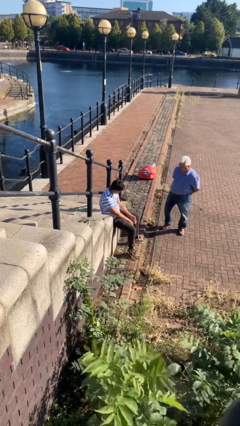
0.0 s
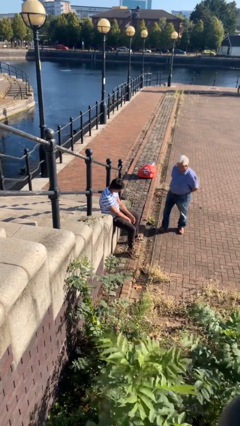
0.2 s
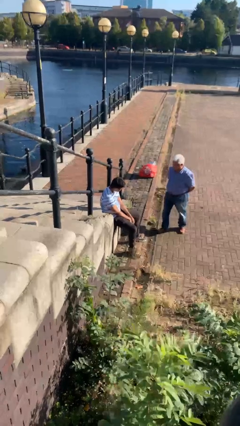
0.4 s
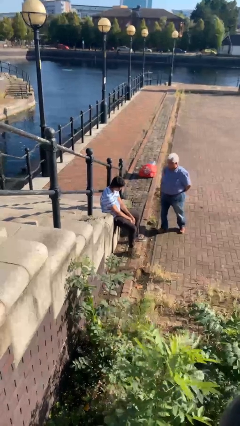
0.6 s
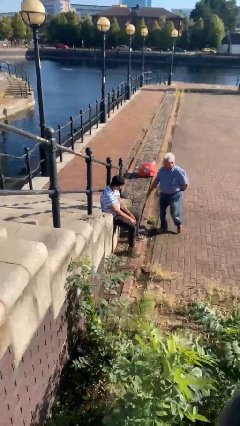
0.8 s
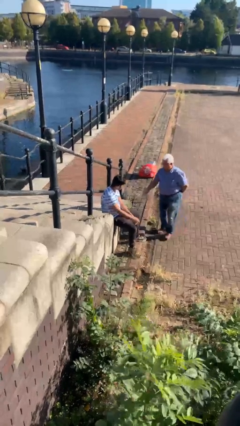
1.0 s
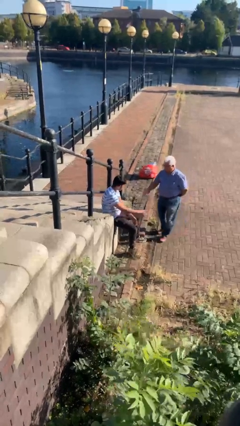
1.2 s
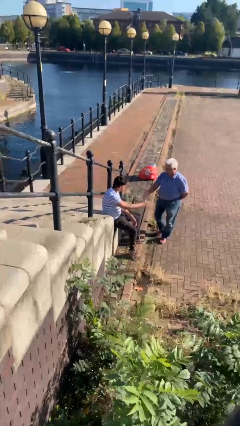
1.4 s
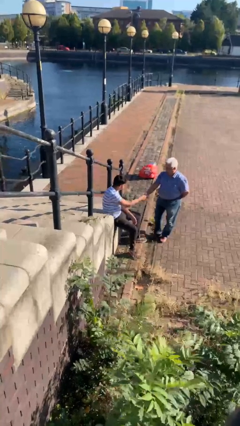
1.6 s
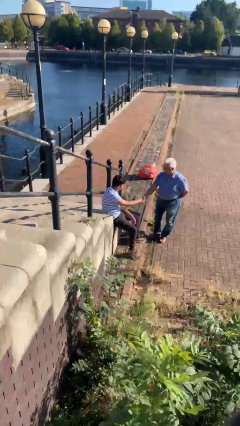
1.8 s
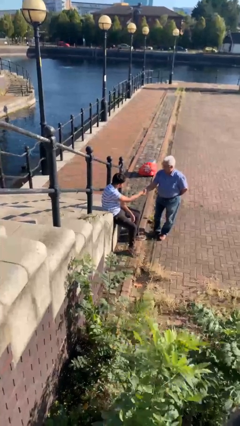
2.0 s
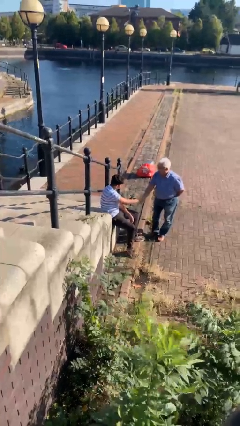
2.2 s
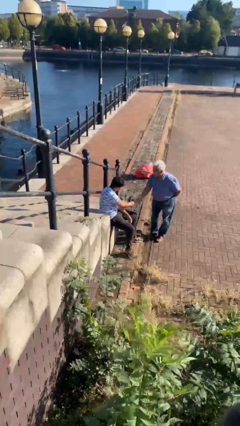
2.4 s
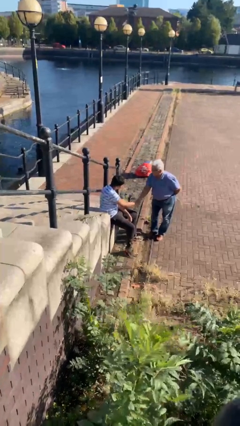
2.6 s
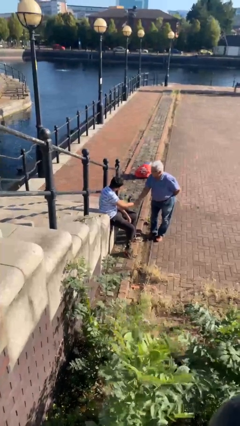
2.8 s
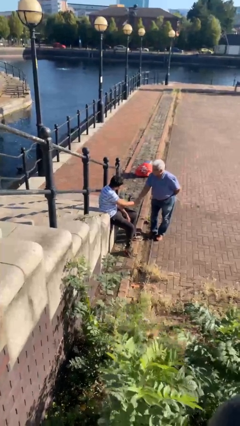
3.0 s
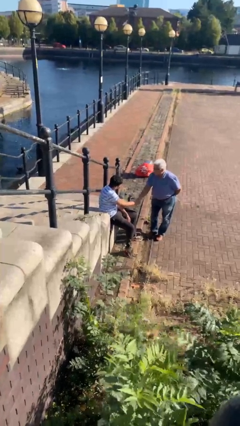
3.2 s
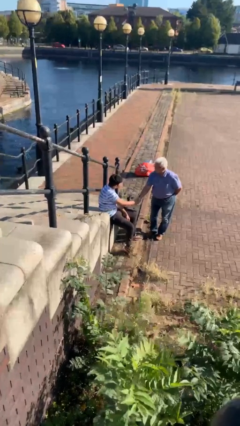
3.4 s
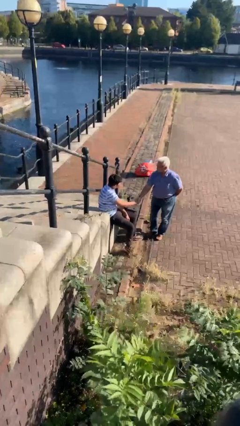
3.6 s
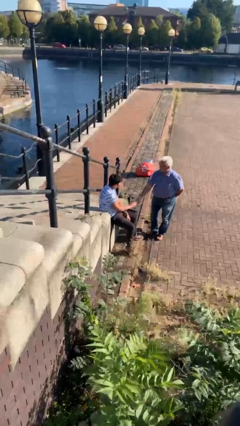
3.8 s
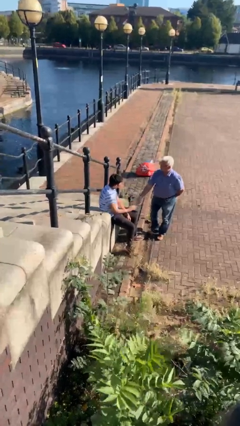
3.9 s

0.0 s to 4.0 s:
person shakes hand

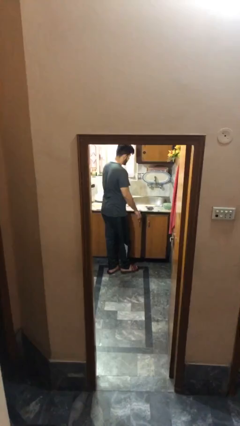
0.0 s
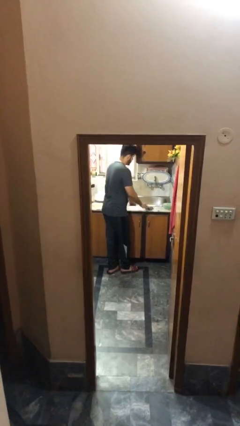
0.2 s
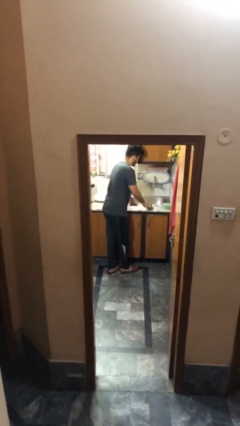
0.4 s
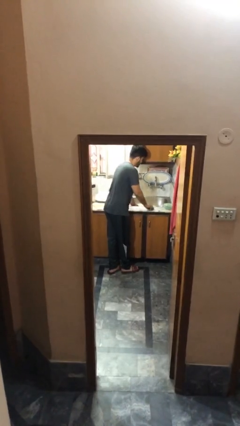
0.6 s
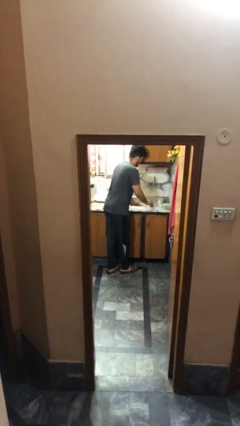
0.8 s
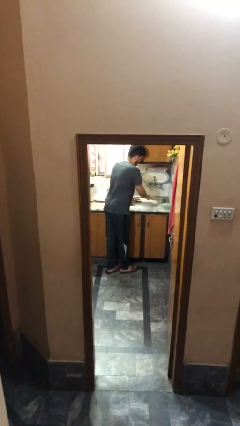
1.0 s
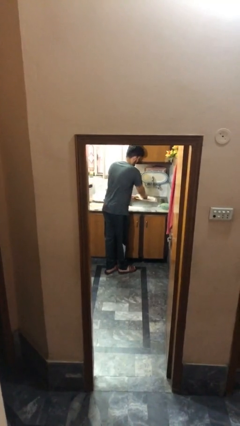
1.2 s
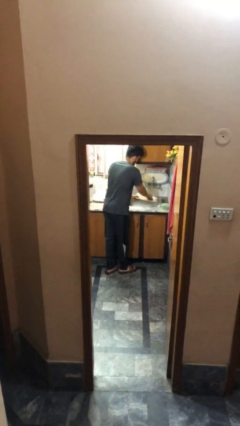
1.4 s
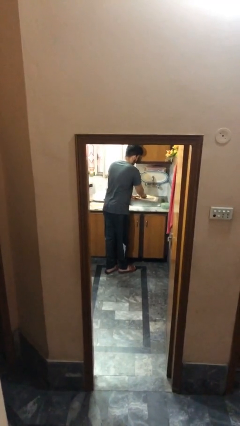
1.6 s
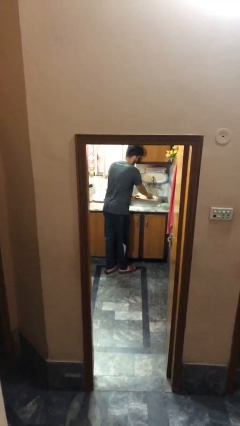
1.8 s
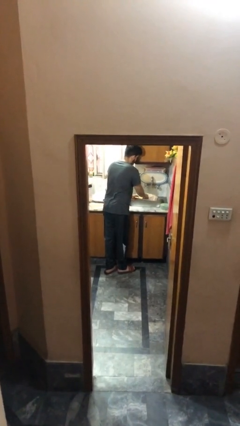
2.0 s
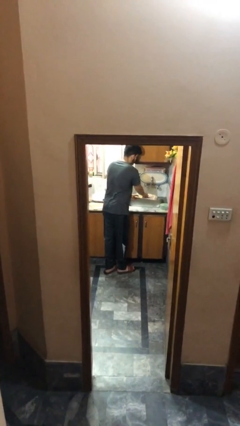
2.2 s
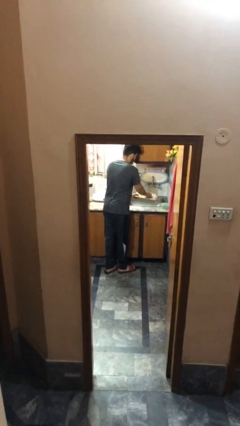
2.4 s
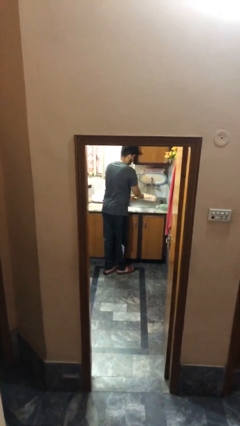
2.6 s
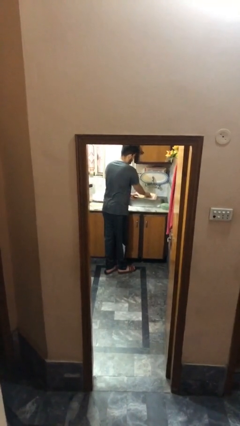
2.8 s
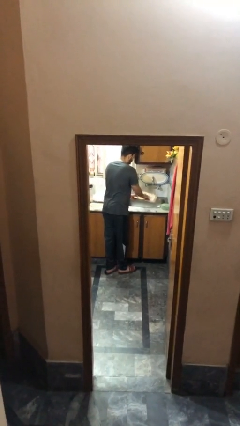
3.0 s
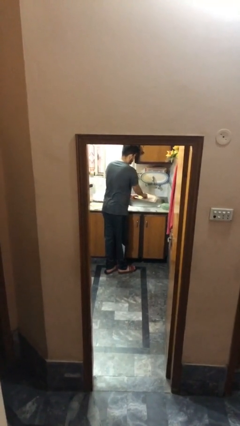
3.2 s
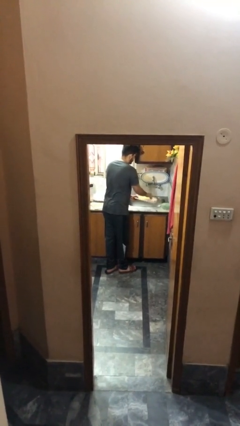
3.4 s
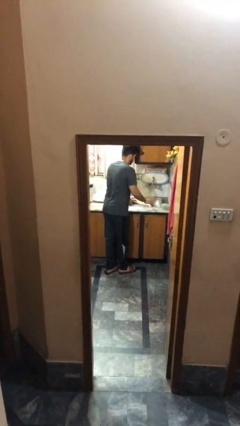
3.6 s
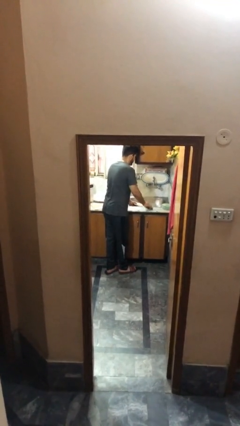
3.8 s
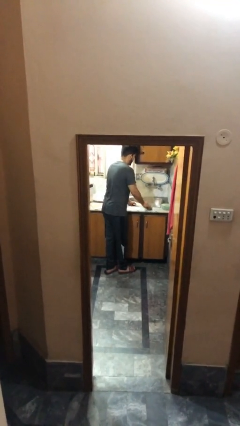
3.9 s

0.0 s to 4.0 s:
person washes dish

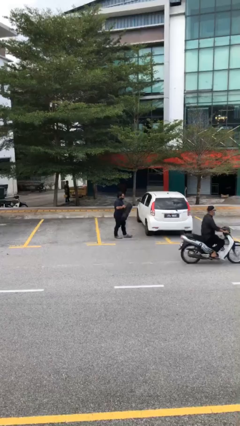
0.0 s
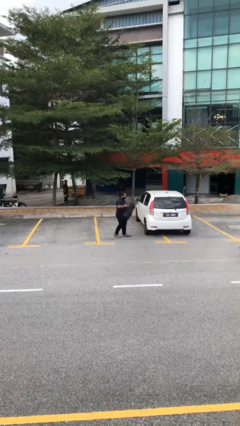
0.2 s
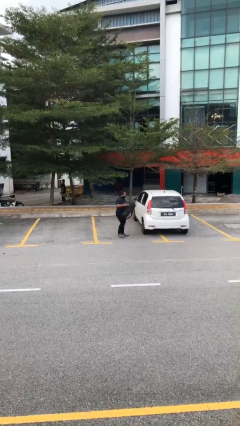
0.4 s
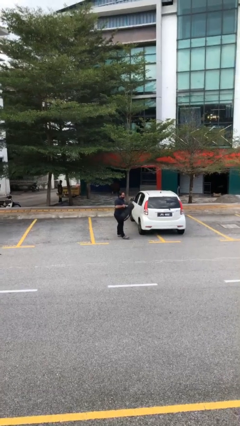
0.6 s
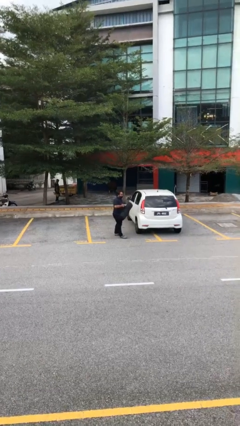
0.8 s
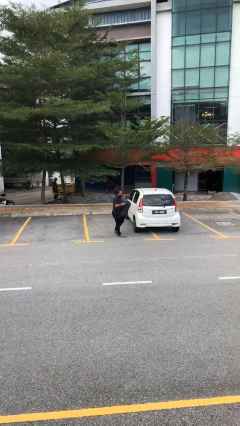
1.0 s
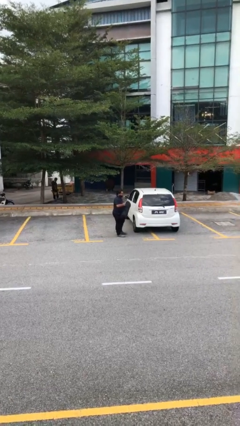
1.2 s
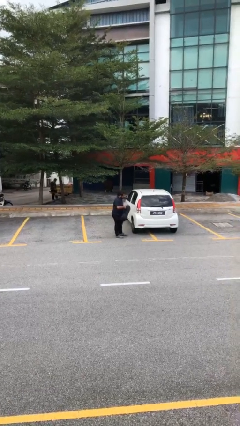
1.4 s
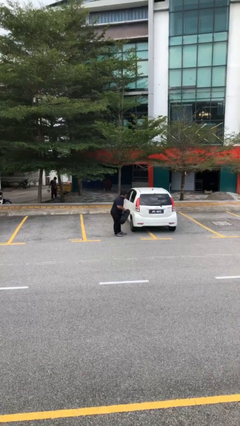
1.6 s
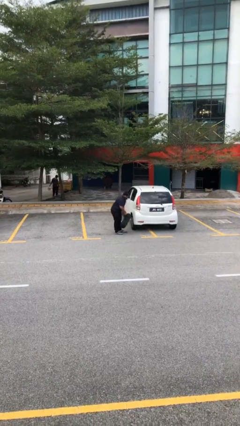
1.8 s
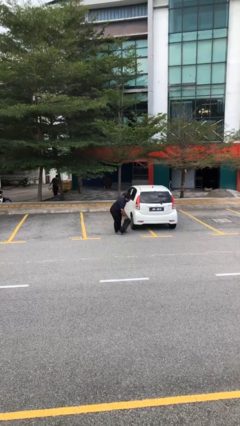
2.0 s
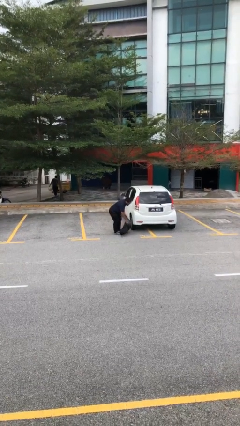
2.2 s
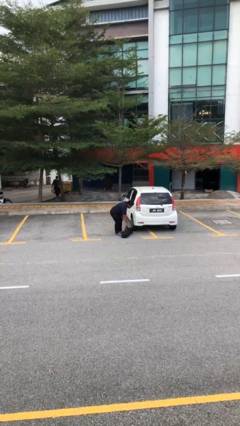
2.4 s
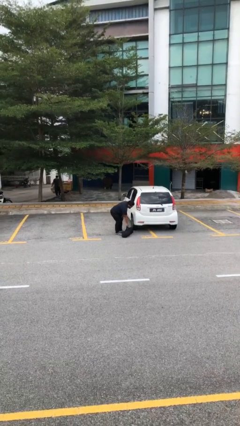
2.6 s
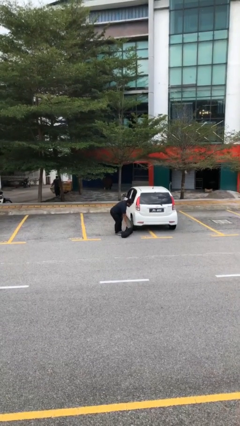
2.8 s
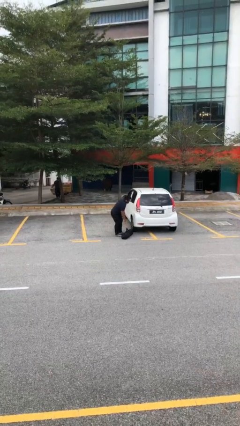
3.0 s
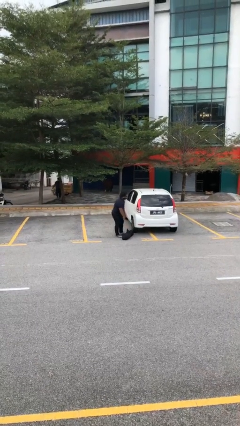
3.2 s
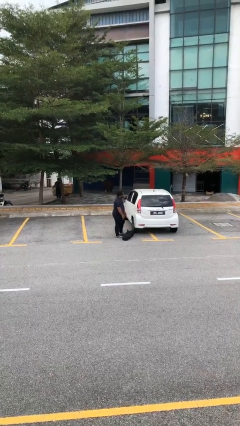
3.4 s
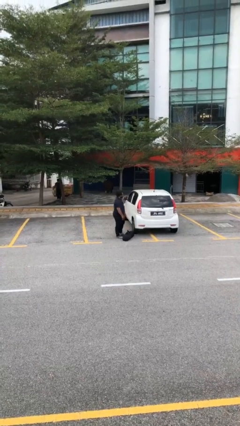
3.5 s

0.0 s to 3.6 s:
person puts down object on floor

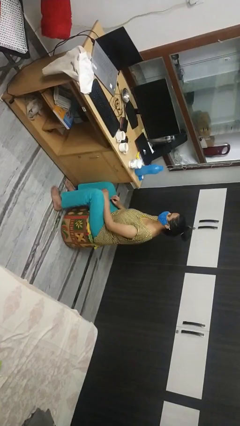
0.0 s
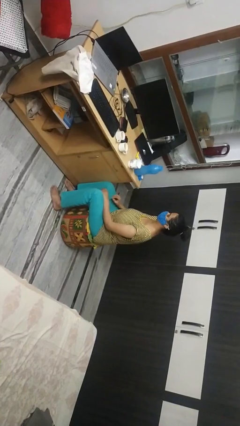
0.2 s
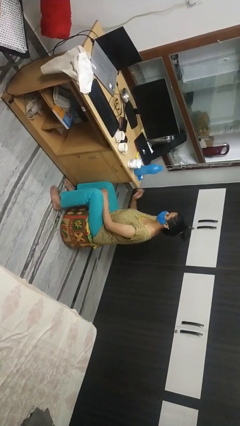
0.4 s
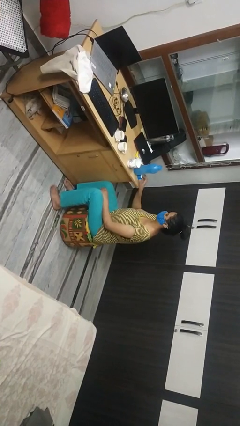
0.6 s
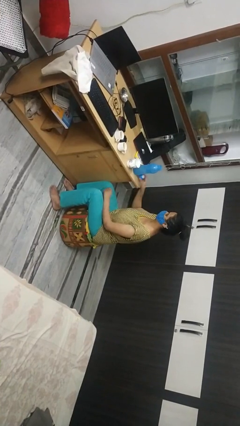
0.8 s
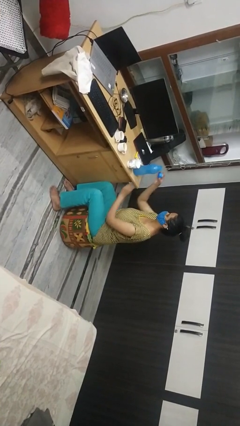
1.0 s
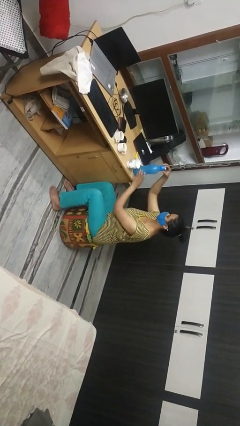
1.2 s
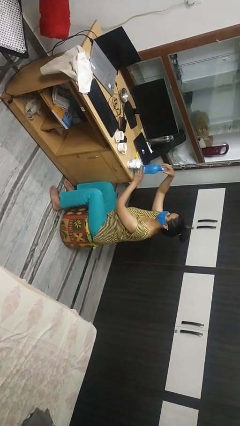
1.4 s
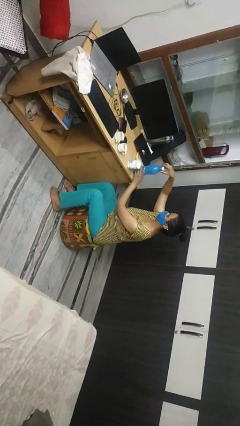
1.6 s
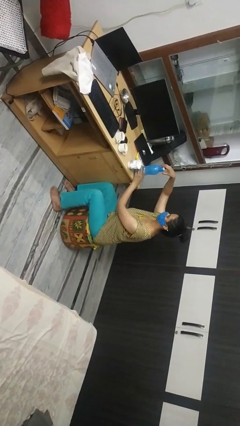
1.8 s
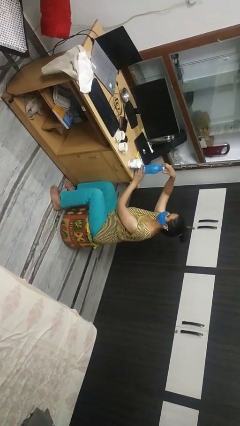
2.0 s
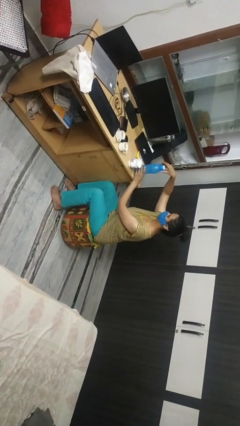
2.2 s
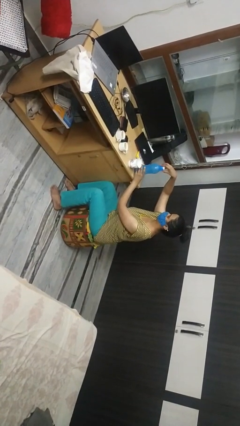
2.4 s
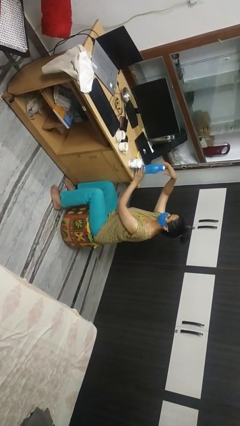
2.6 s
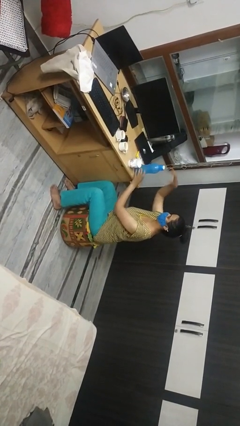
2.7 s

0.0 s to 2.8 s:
person screws lid to bottle

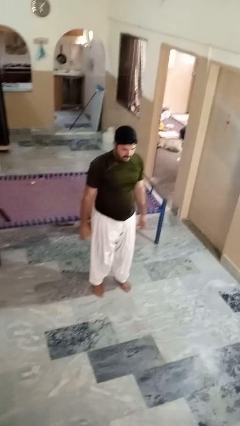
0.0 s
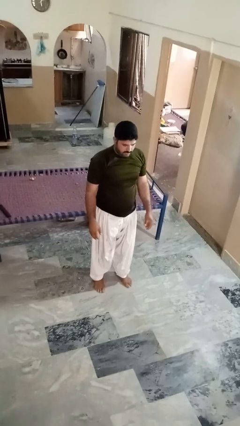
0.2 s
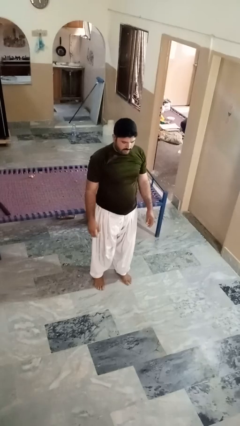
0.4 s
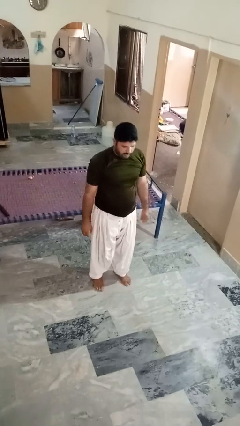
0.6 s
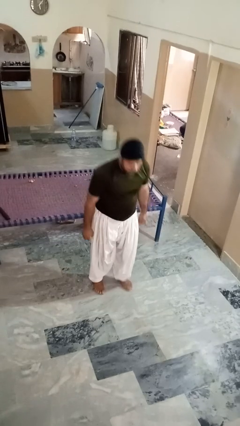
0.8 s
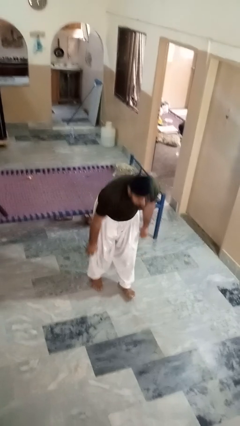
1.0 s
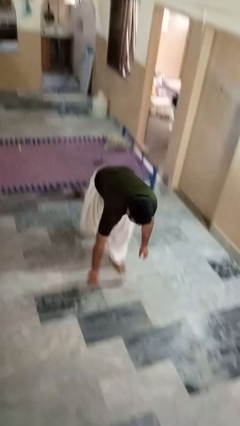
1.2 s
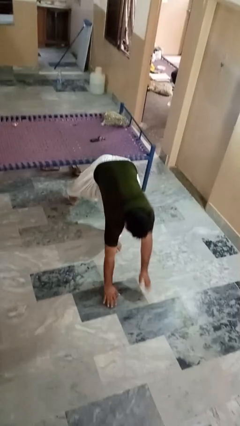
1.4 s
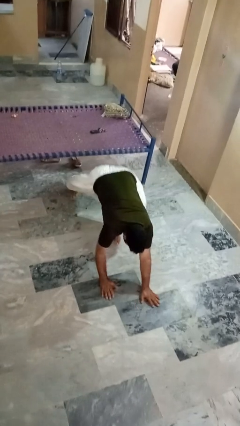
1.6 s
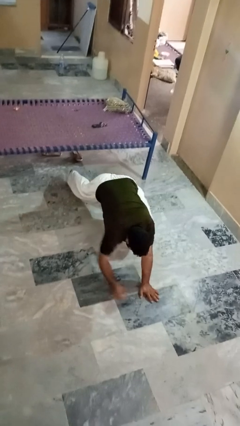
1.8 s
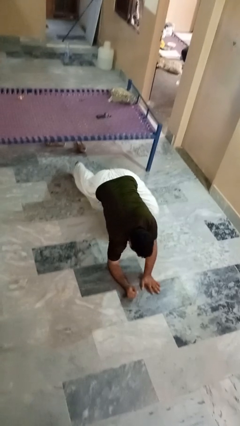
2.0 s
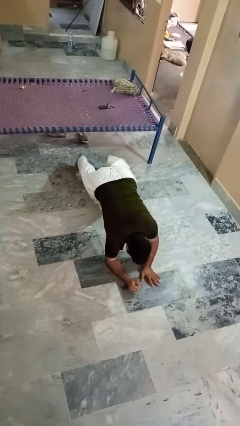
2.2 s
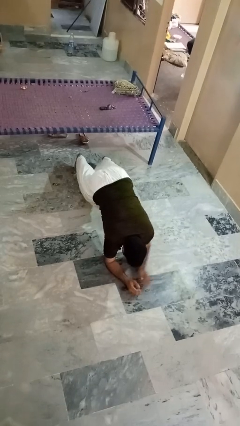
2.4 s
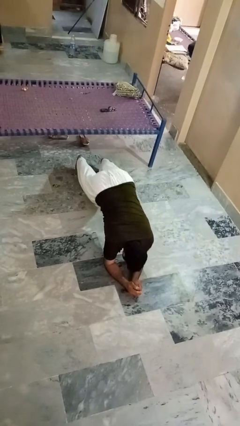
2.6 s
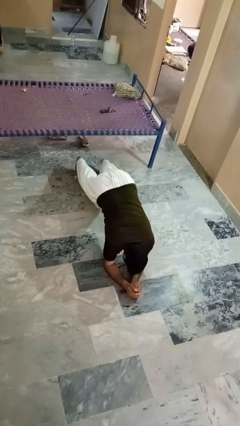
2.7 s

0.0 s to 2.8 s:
person exercises with plank

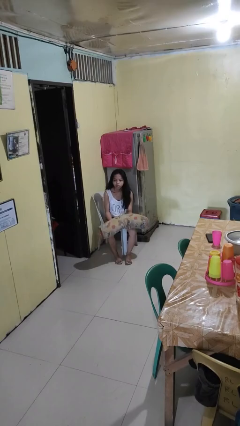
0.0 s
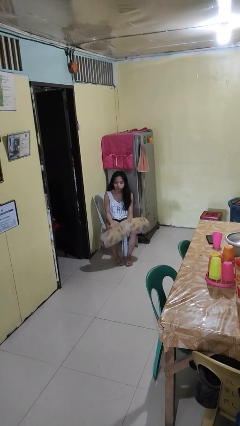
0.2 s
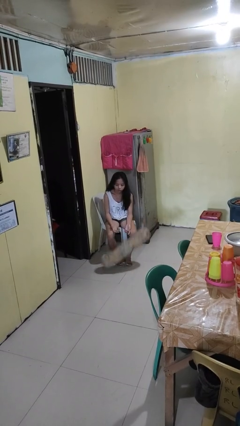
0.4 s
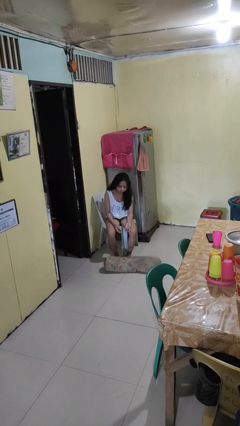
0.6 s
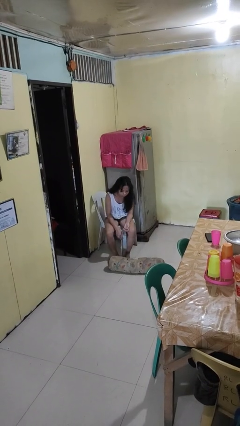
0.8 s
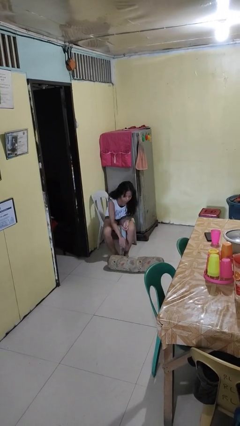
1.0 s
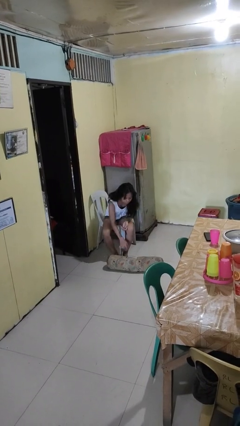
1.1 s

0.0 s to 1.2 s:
person drops object
